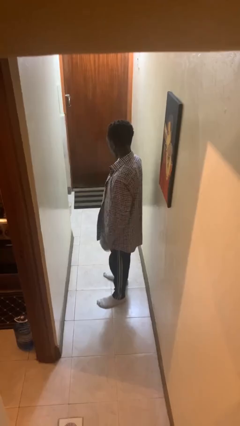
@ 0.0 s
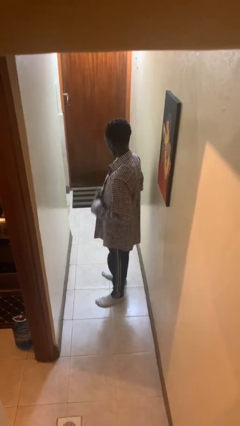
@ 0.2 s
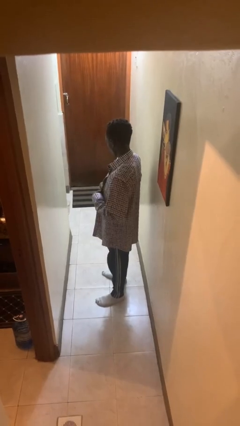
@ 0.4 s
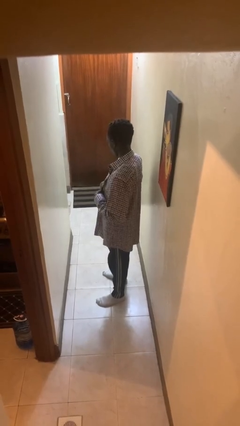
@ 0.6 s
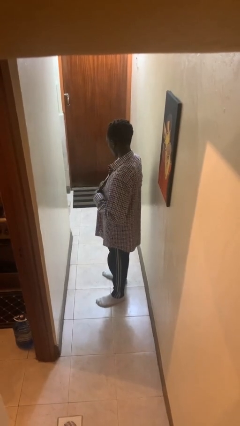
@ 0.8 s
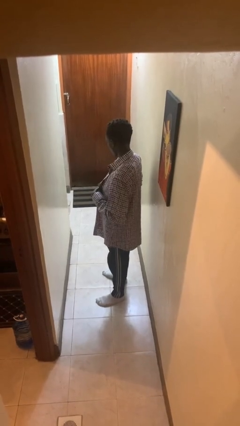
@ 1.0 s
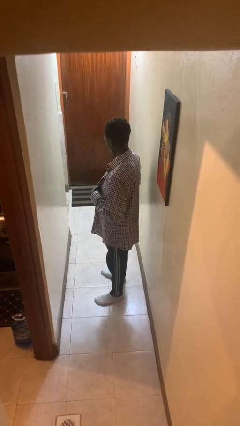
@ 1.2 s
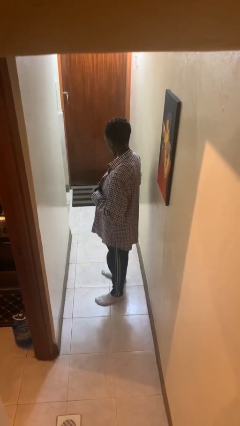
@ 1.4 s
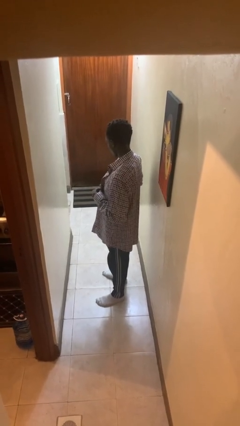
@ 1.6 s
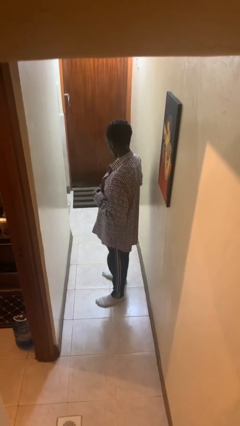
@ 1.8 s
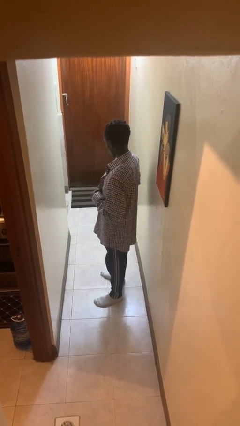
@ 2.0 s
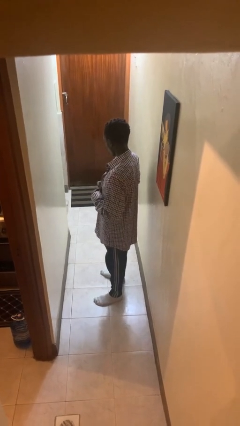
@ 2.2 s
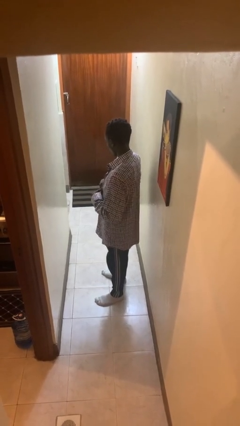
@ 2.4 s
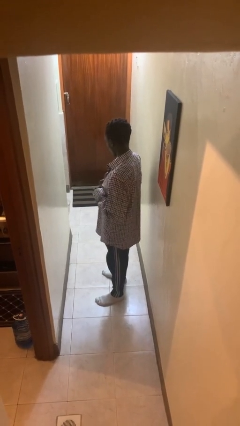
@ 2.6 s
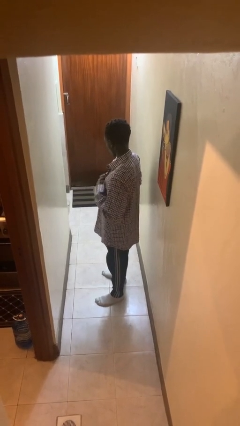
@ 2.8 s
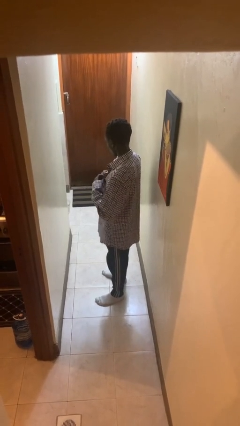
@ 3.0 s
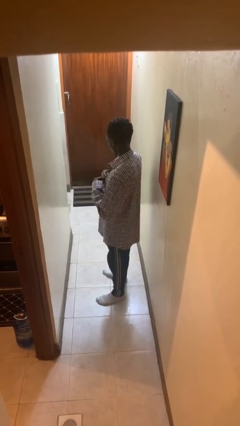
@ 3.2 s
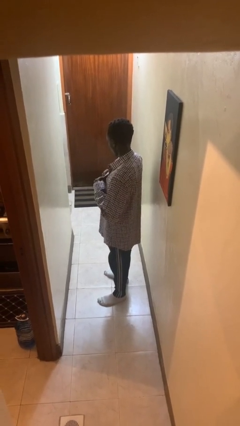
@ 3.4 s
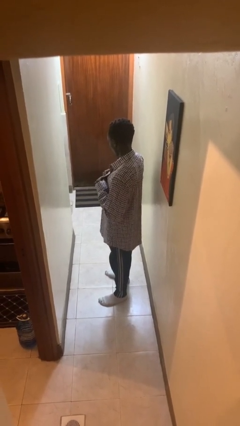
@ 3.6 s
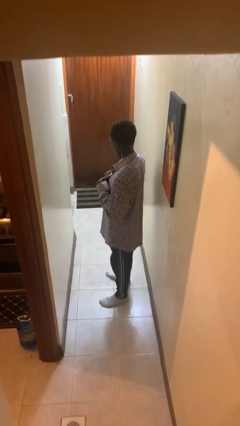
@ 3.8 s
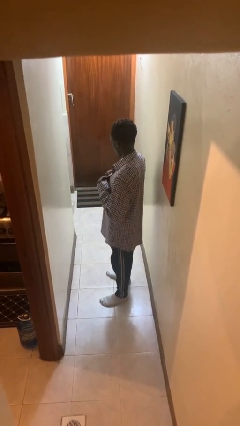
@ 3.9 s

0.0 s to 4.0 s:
person buttons shirt

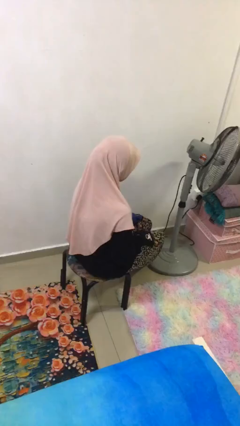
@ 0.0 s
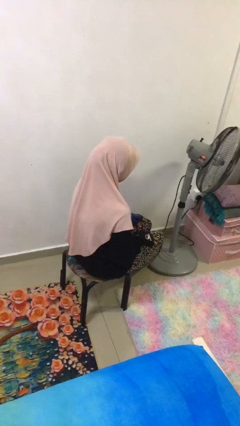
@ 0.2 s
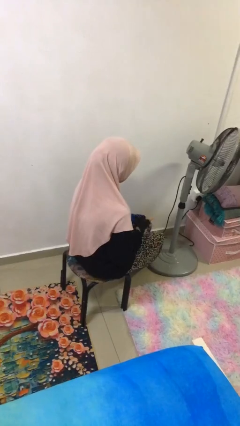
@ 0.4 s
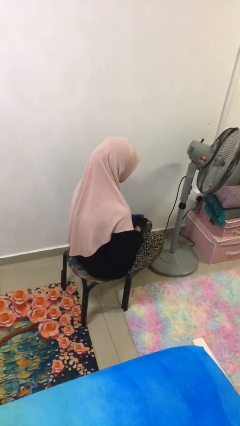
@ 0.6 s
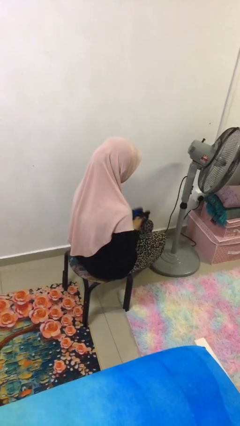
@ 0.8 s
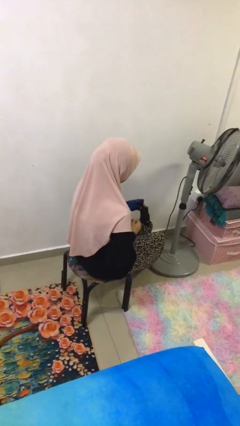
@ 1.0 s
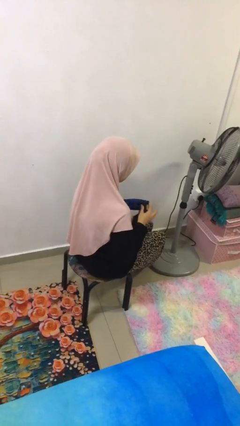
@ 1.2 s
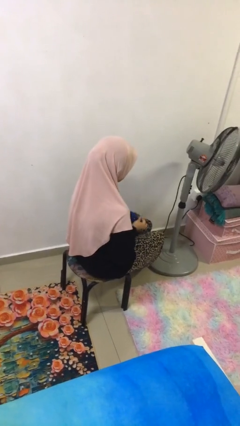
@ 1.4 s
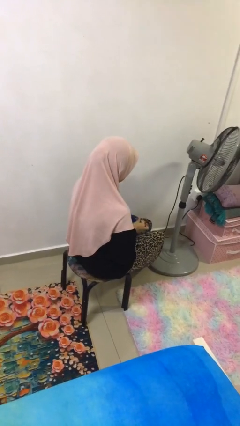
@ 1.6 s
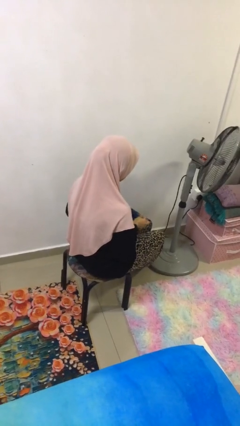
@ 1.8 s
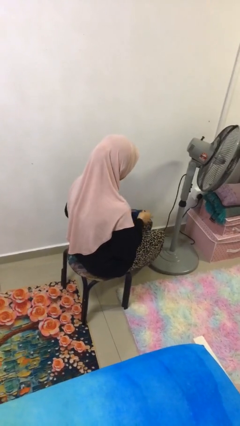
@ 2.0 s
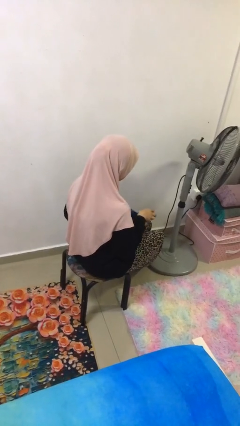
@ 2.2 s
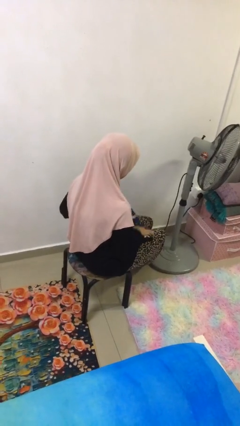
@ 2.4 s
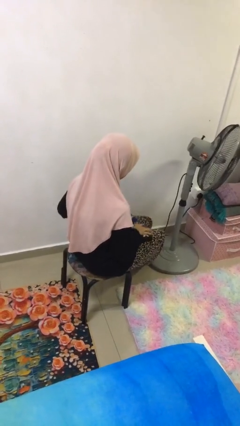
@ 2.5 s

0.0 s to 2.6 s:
person takes off gloves

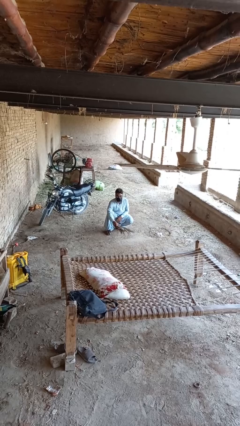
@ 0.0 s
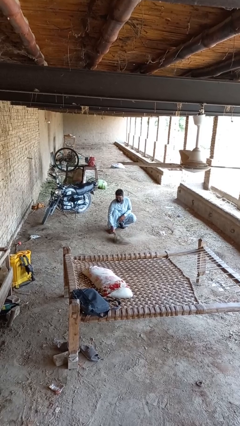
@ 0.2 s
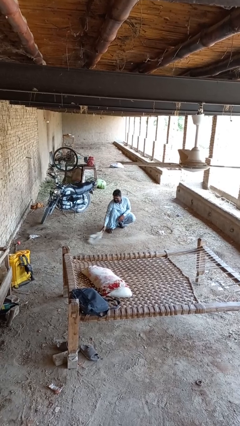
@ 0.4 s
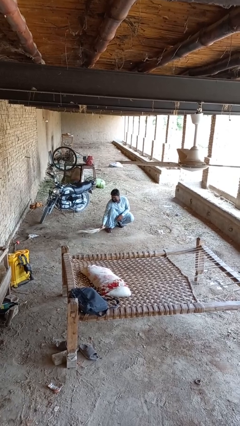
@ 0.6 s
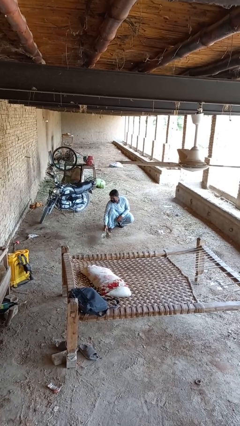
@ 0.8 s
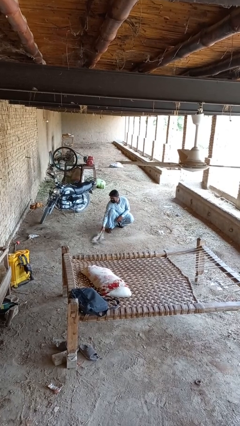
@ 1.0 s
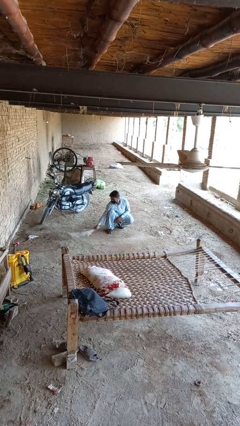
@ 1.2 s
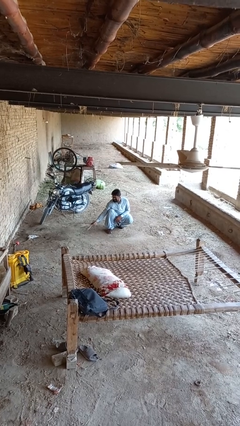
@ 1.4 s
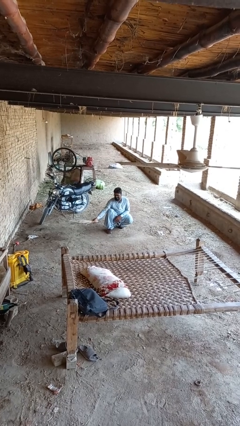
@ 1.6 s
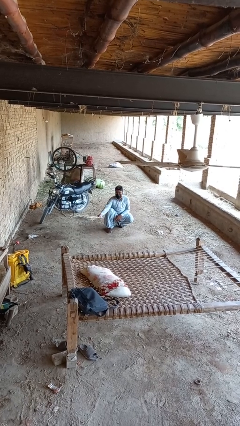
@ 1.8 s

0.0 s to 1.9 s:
person sweeps floor

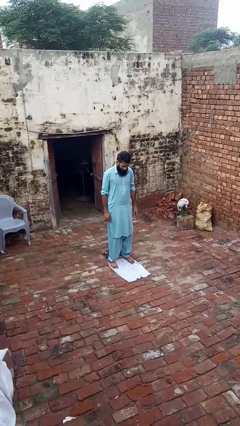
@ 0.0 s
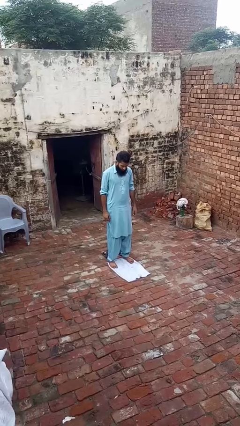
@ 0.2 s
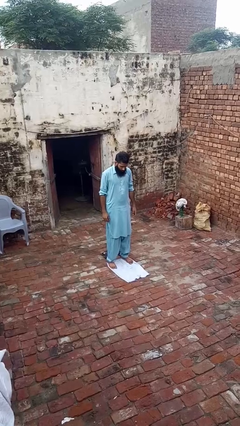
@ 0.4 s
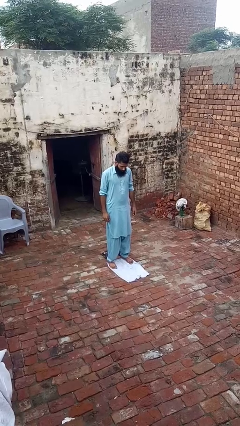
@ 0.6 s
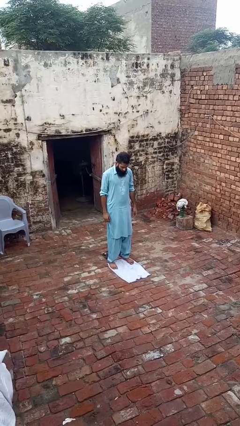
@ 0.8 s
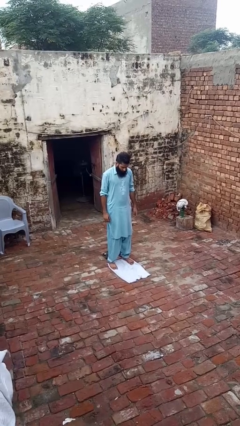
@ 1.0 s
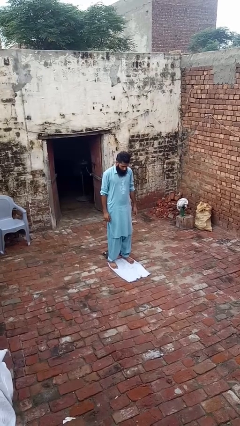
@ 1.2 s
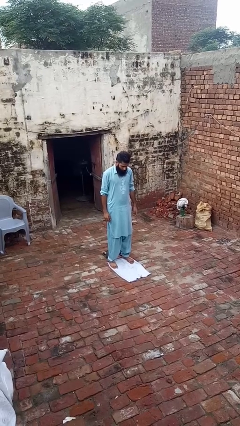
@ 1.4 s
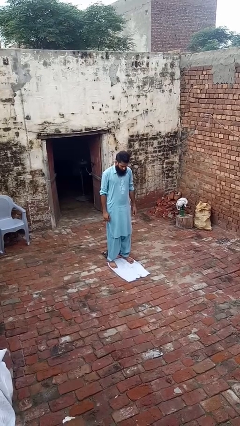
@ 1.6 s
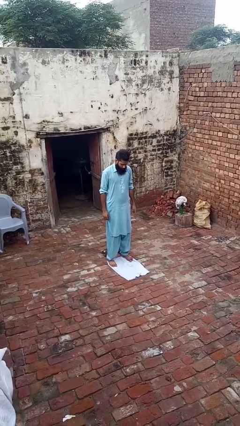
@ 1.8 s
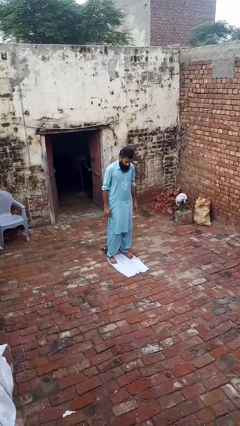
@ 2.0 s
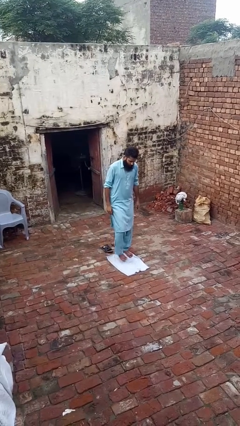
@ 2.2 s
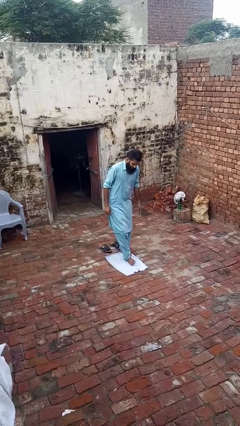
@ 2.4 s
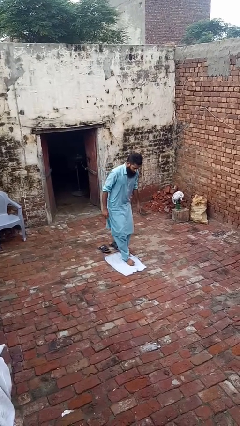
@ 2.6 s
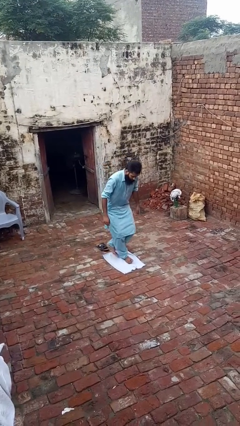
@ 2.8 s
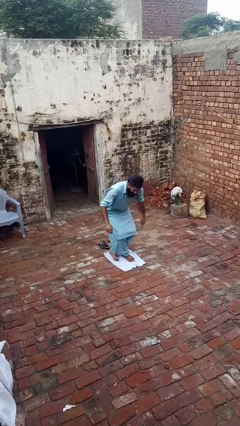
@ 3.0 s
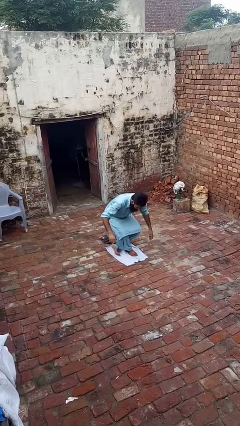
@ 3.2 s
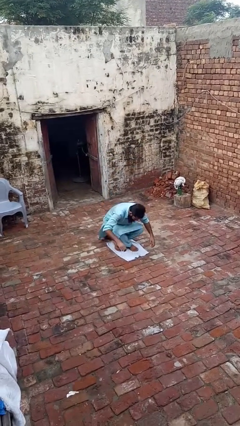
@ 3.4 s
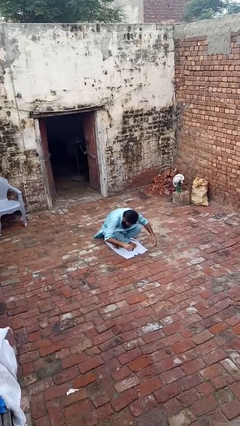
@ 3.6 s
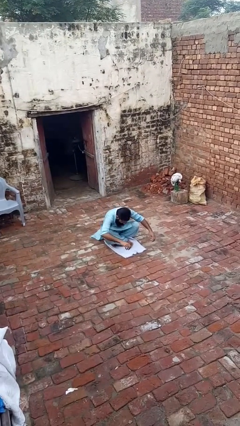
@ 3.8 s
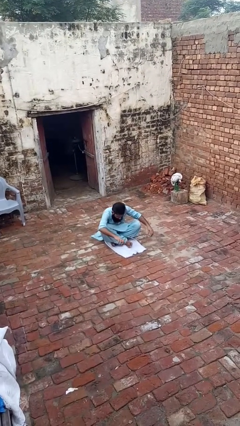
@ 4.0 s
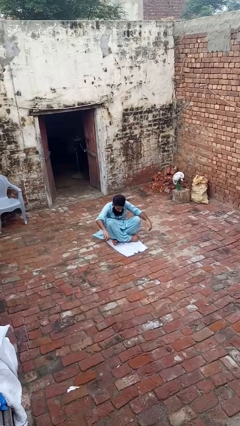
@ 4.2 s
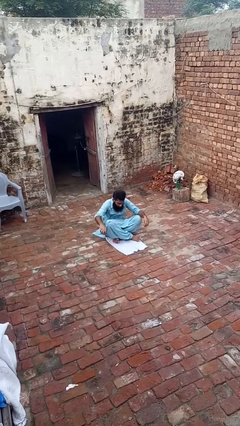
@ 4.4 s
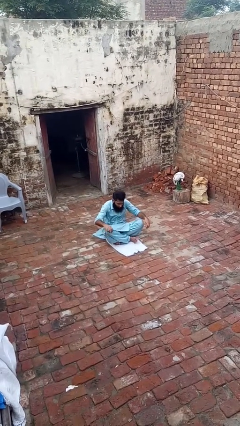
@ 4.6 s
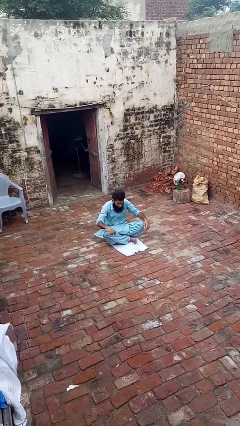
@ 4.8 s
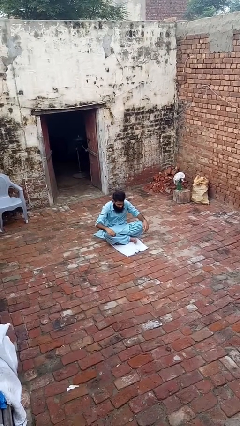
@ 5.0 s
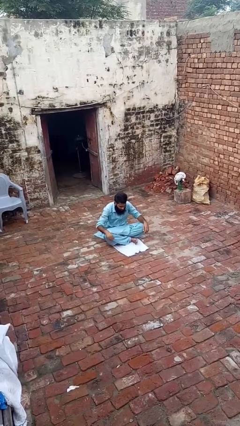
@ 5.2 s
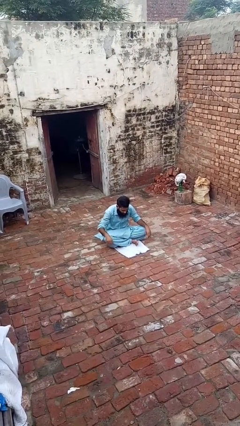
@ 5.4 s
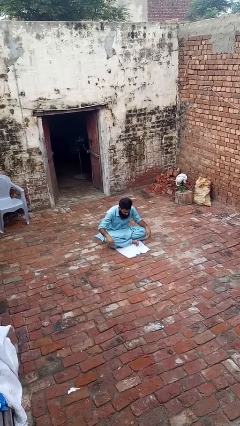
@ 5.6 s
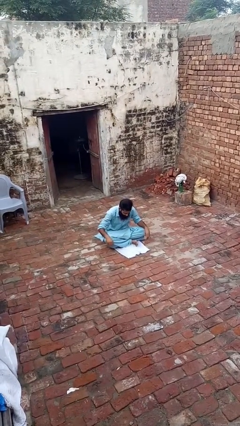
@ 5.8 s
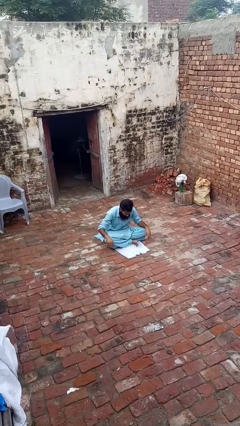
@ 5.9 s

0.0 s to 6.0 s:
person sits crisscross

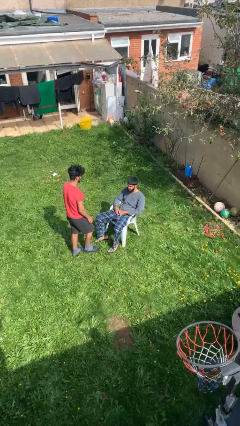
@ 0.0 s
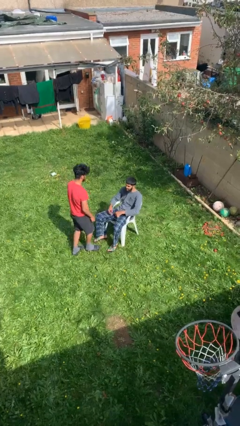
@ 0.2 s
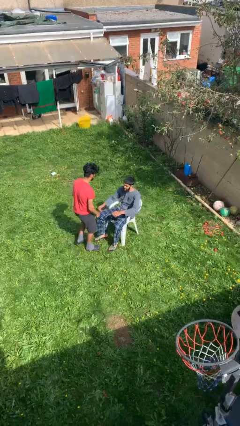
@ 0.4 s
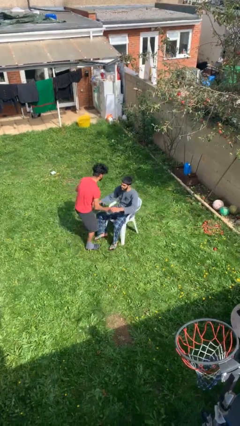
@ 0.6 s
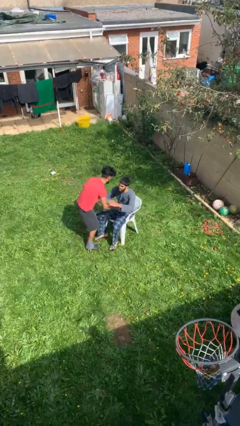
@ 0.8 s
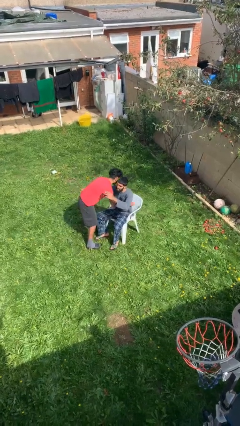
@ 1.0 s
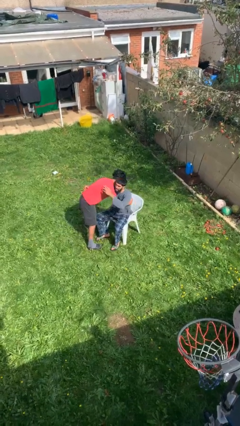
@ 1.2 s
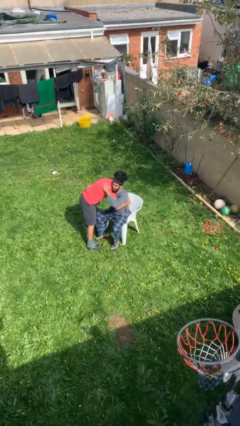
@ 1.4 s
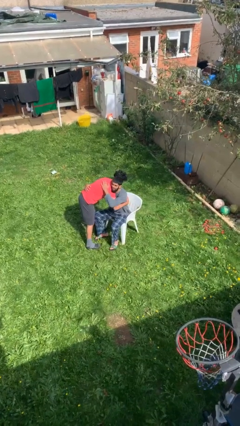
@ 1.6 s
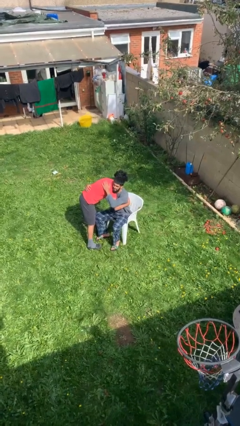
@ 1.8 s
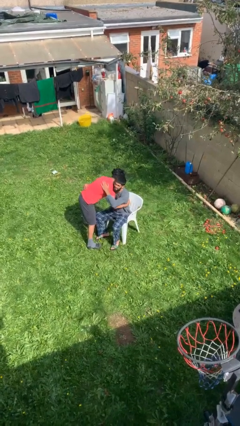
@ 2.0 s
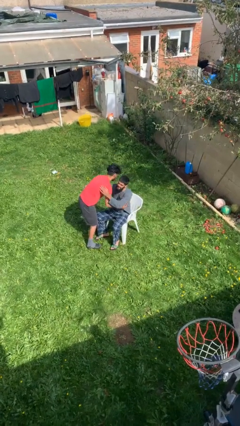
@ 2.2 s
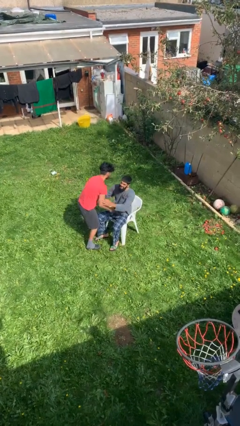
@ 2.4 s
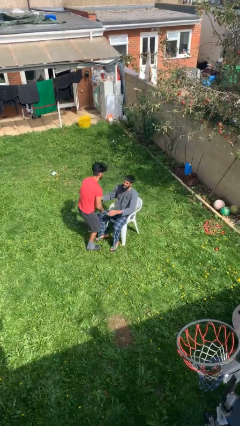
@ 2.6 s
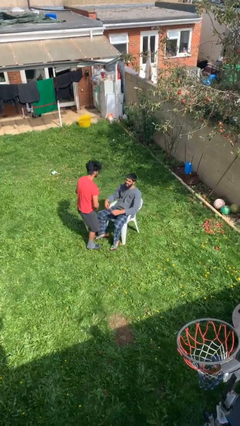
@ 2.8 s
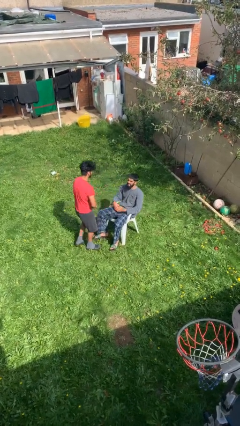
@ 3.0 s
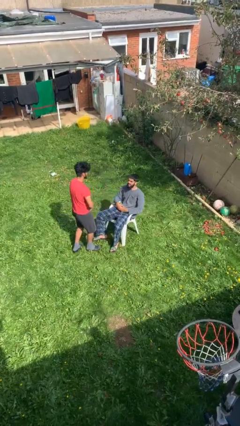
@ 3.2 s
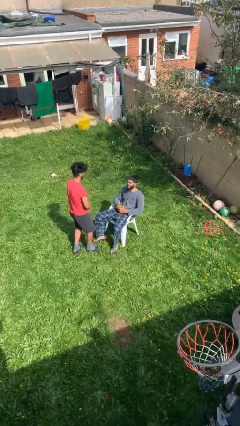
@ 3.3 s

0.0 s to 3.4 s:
person embraces person
